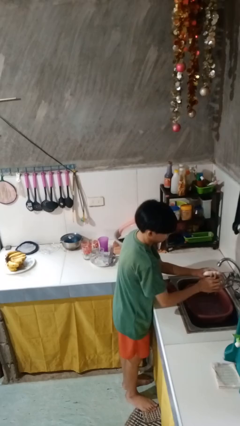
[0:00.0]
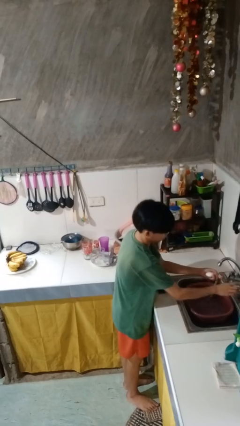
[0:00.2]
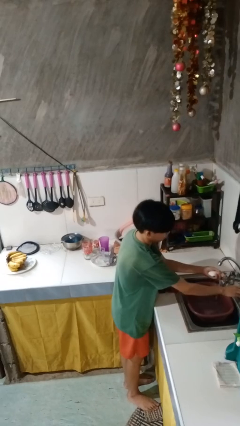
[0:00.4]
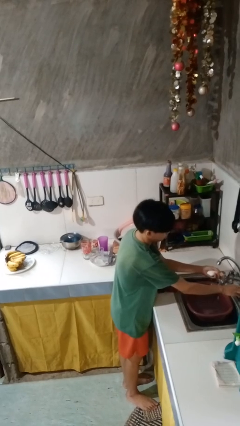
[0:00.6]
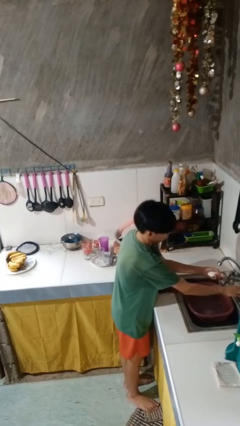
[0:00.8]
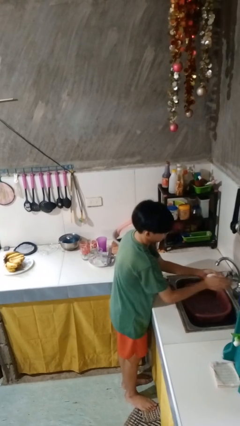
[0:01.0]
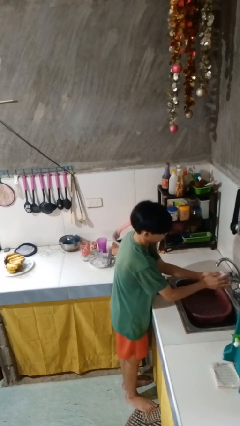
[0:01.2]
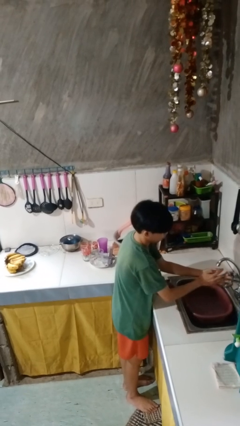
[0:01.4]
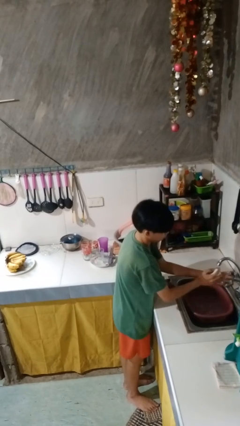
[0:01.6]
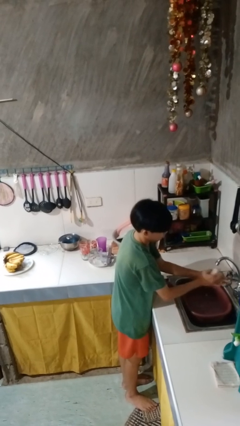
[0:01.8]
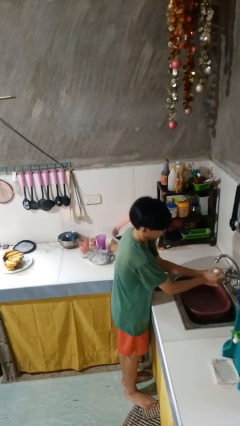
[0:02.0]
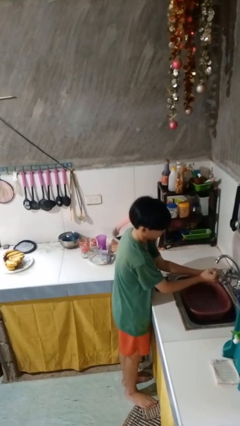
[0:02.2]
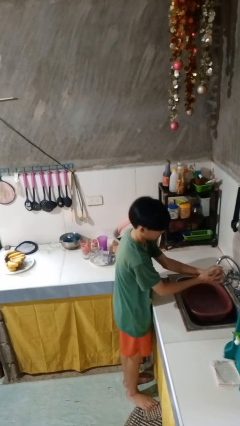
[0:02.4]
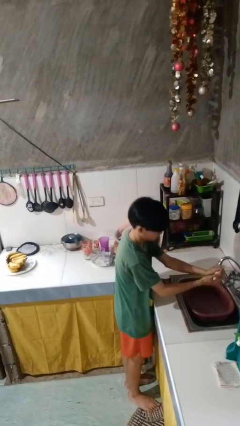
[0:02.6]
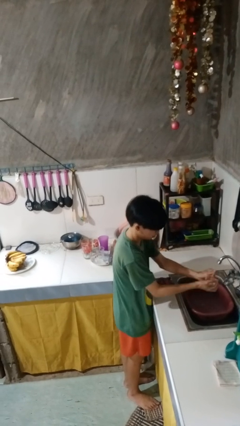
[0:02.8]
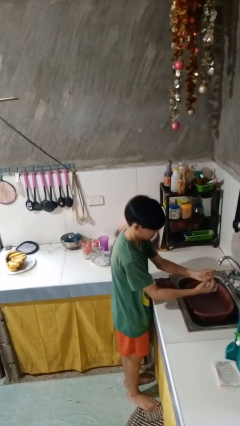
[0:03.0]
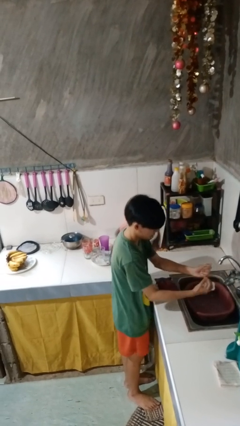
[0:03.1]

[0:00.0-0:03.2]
person washes hands

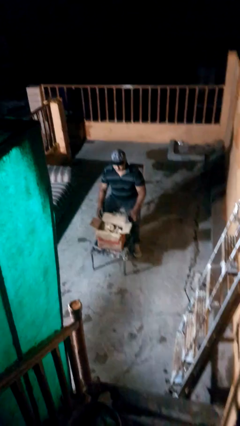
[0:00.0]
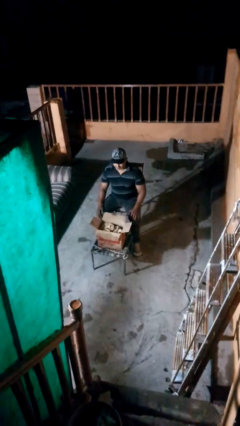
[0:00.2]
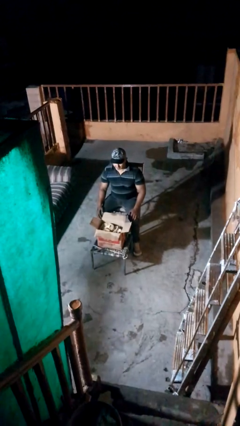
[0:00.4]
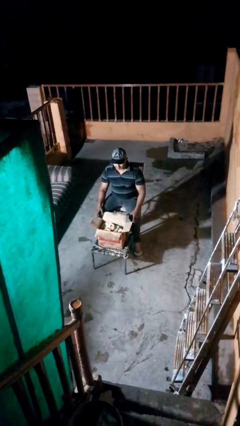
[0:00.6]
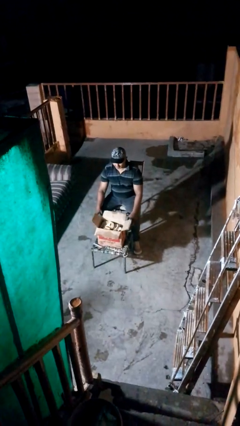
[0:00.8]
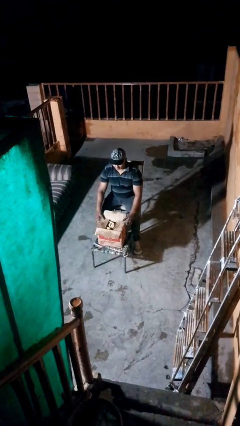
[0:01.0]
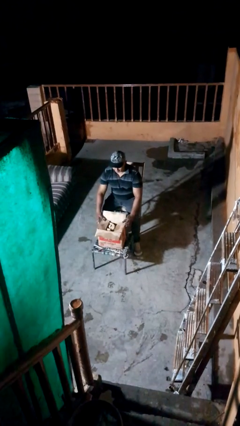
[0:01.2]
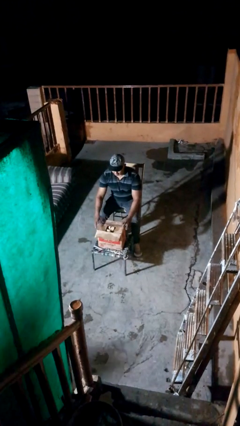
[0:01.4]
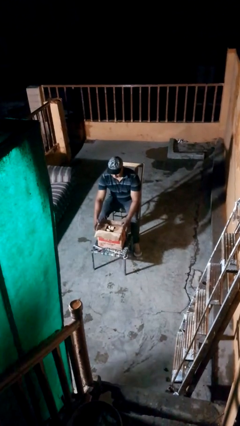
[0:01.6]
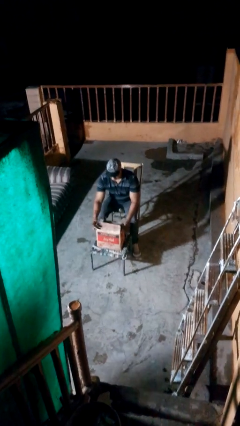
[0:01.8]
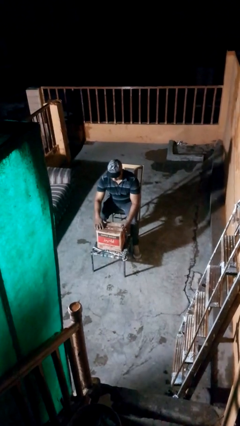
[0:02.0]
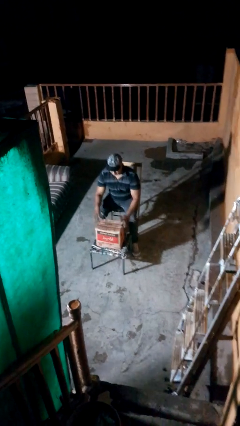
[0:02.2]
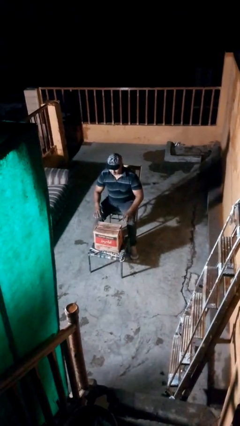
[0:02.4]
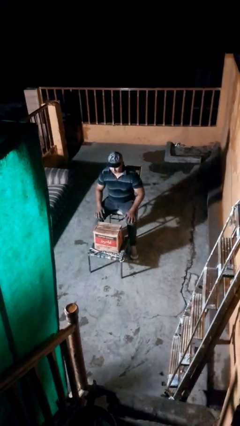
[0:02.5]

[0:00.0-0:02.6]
person closes box

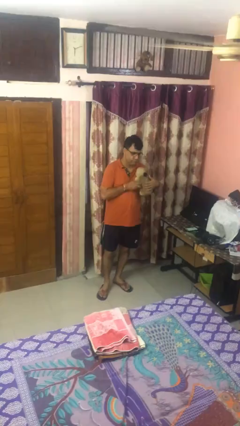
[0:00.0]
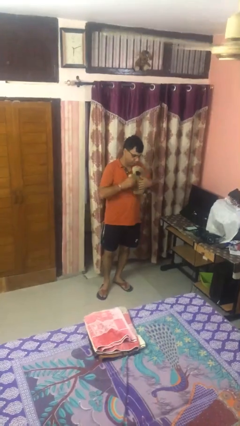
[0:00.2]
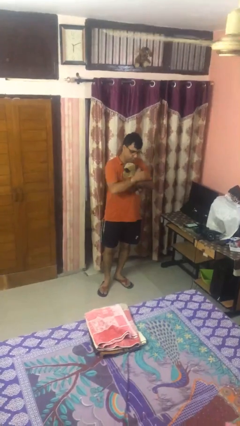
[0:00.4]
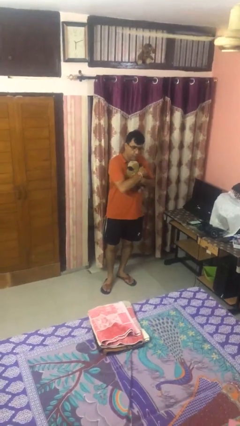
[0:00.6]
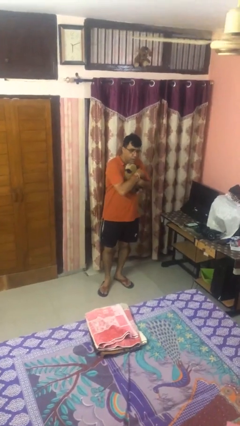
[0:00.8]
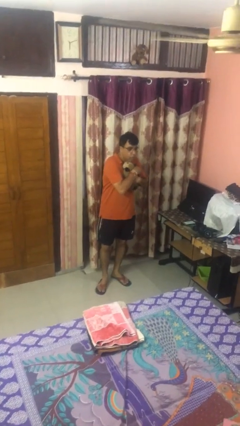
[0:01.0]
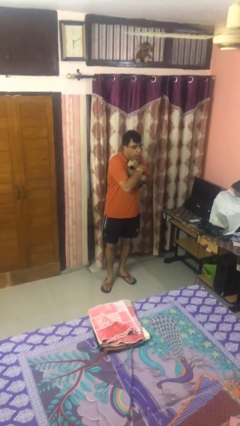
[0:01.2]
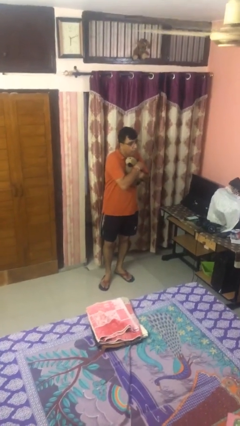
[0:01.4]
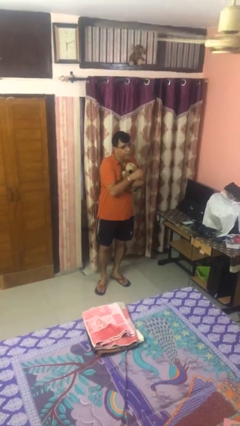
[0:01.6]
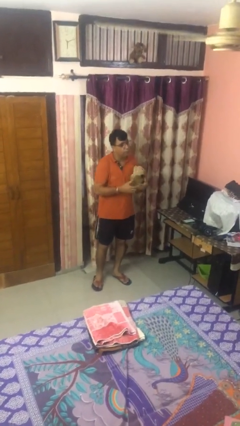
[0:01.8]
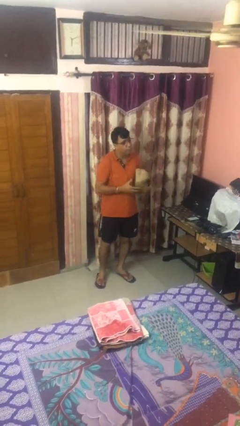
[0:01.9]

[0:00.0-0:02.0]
person hugs stuffed animal

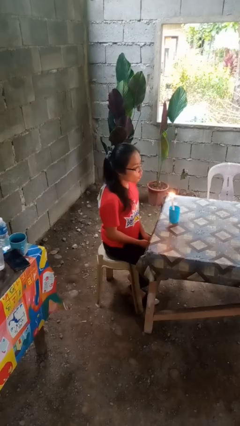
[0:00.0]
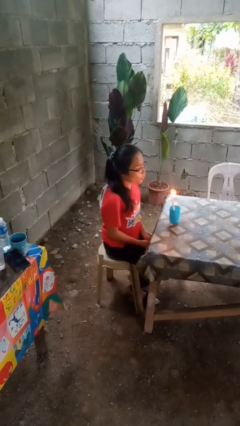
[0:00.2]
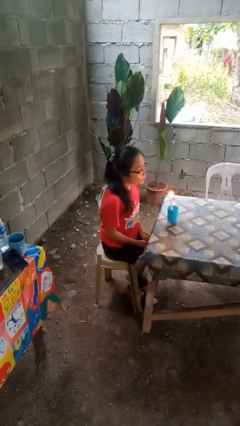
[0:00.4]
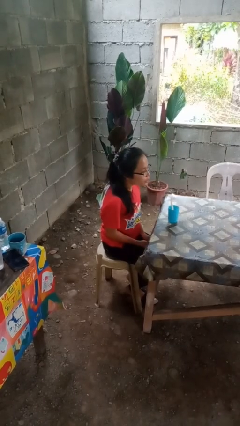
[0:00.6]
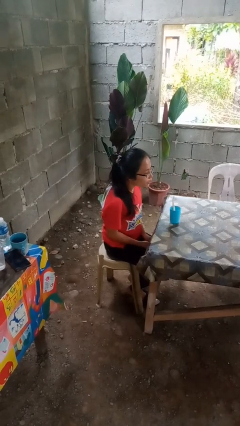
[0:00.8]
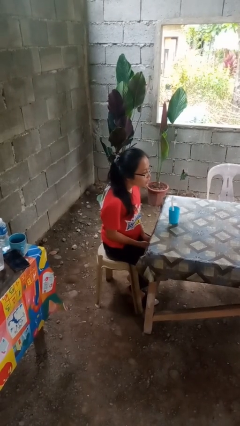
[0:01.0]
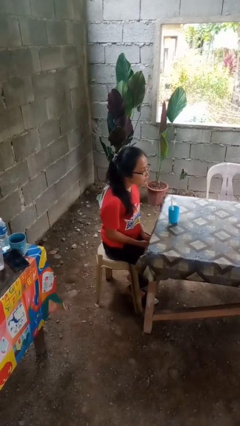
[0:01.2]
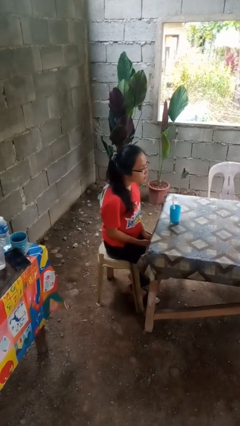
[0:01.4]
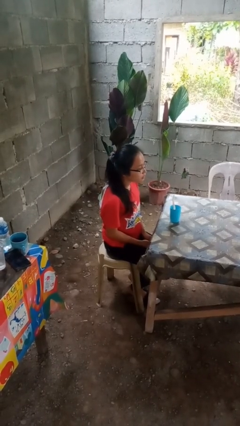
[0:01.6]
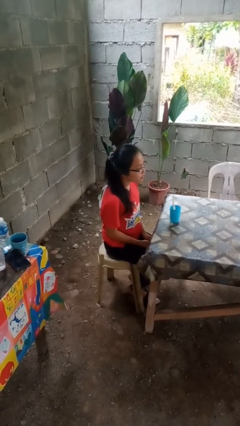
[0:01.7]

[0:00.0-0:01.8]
person extinguishes candle

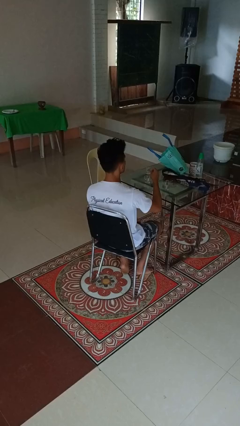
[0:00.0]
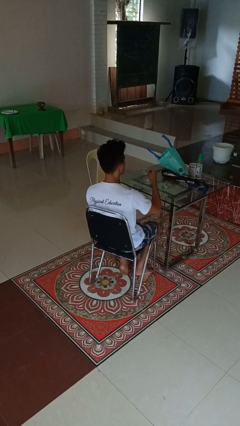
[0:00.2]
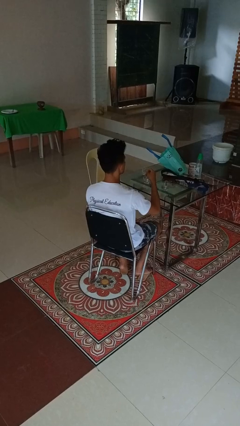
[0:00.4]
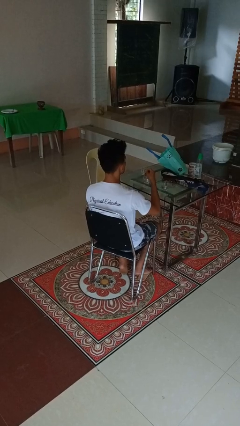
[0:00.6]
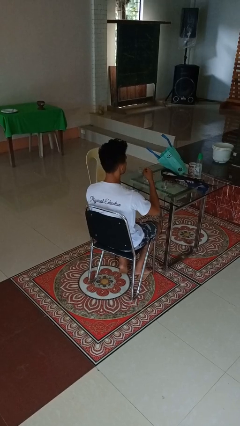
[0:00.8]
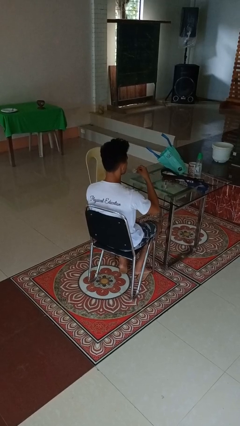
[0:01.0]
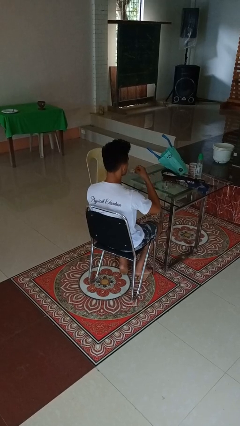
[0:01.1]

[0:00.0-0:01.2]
person picks up object from table

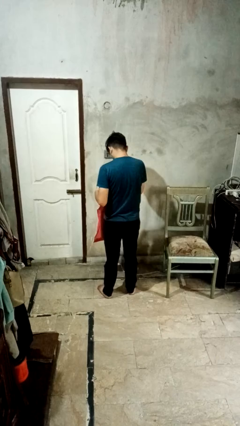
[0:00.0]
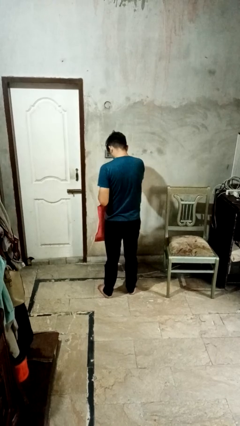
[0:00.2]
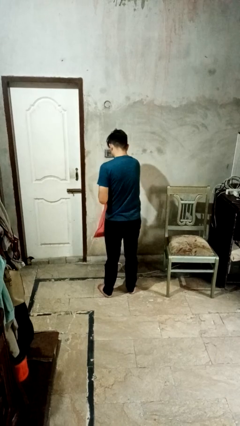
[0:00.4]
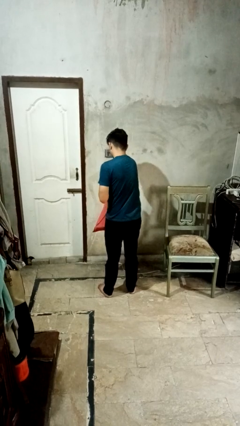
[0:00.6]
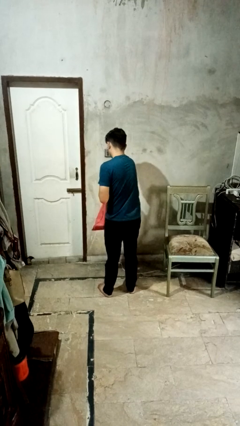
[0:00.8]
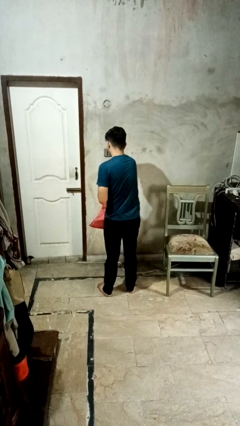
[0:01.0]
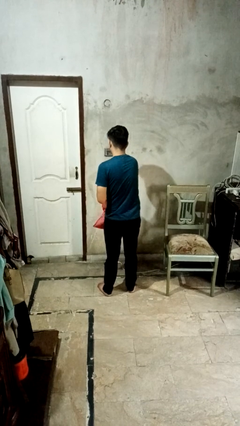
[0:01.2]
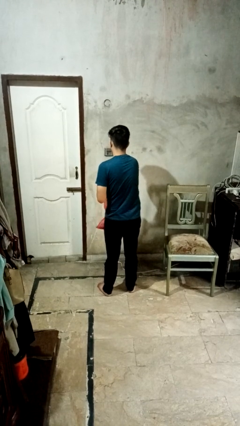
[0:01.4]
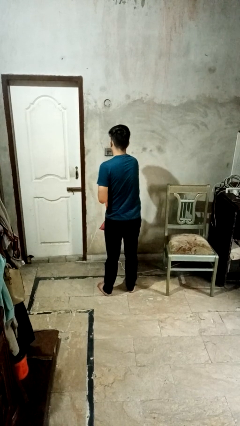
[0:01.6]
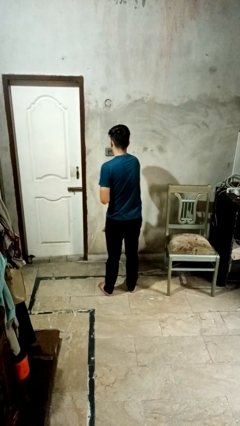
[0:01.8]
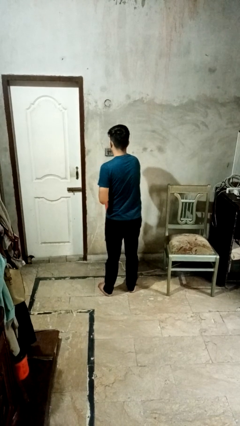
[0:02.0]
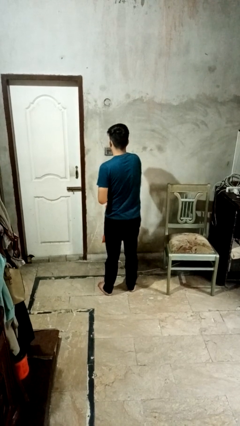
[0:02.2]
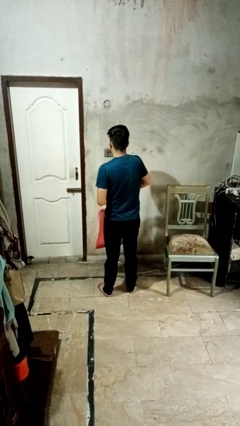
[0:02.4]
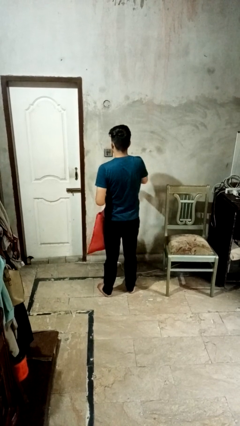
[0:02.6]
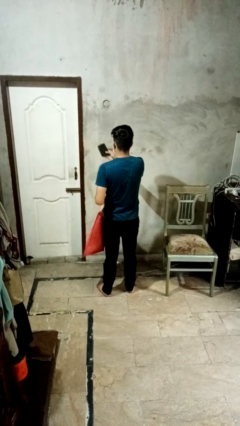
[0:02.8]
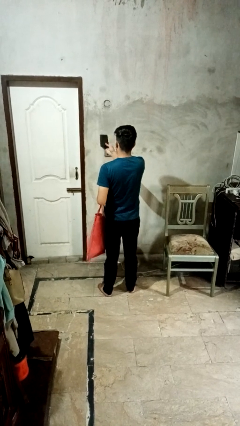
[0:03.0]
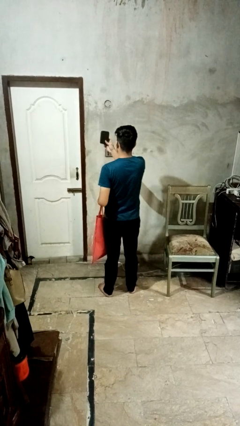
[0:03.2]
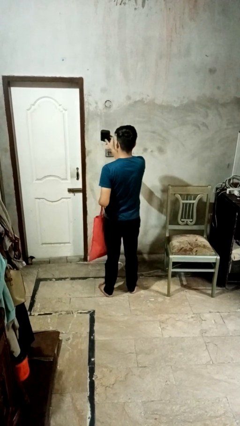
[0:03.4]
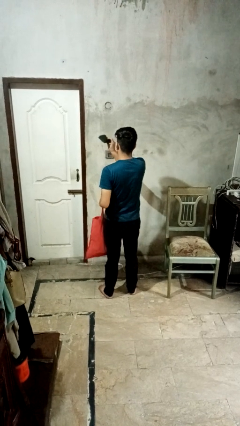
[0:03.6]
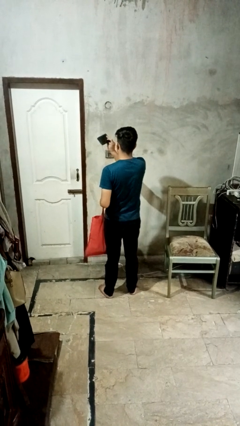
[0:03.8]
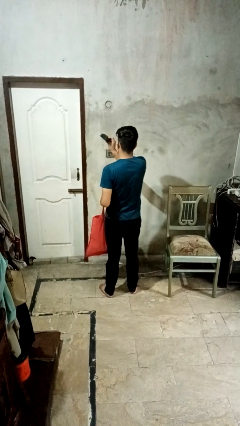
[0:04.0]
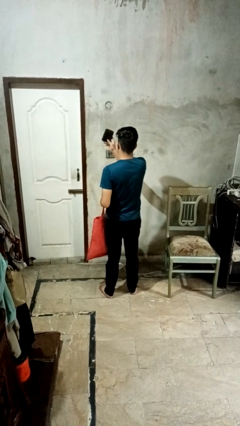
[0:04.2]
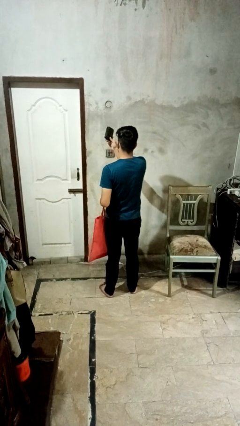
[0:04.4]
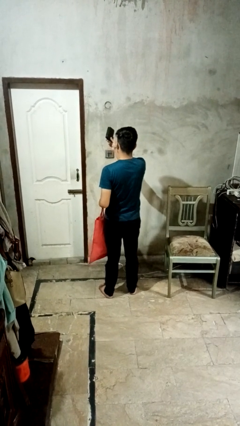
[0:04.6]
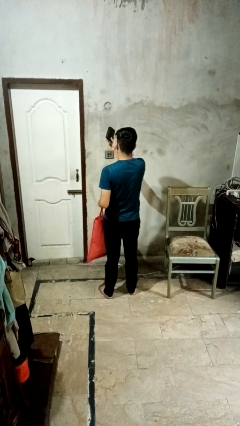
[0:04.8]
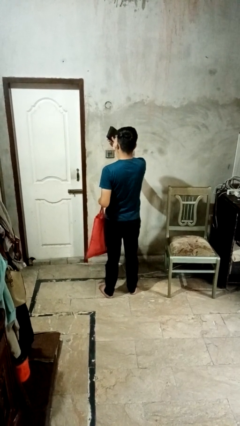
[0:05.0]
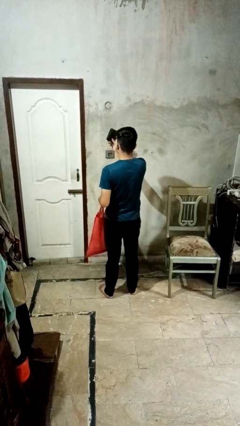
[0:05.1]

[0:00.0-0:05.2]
person takes object from bag

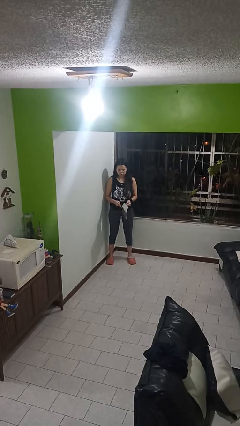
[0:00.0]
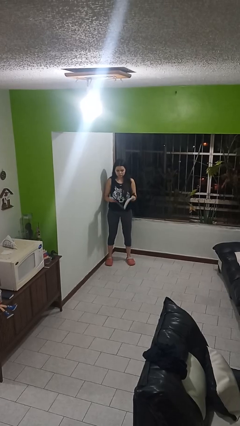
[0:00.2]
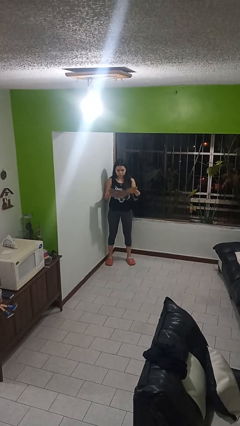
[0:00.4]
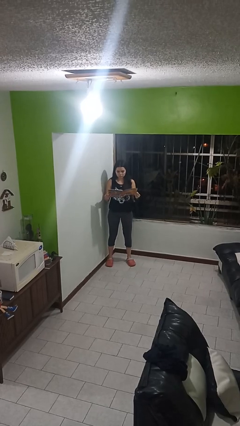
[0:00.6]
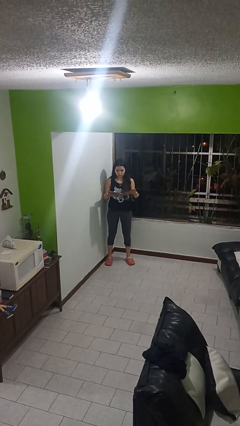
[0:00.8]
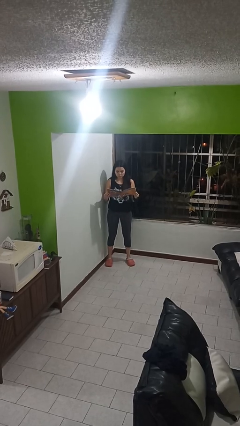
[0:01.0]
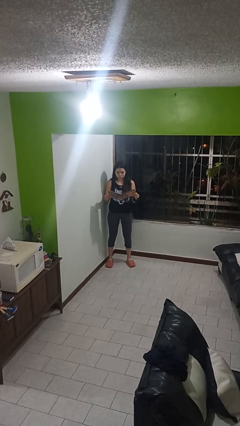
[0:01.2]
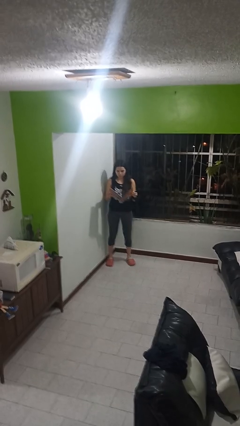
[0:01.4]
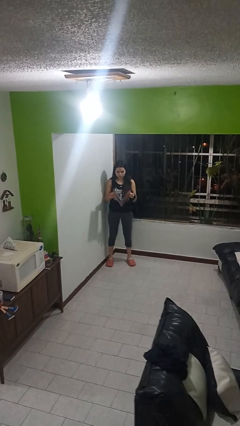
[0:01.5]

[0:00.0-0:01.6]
person reads magazine
